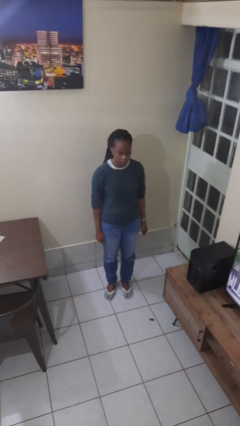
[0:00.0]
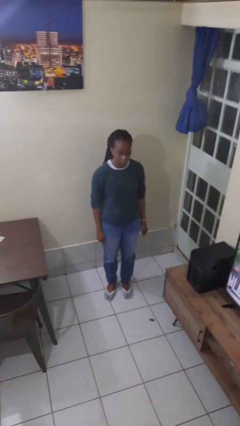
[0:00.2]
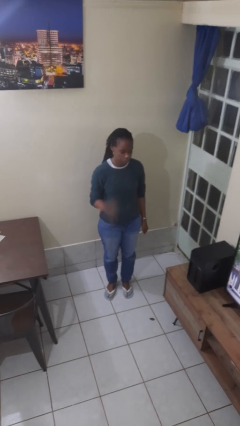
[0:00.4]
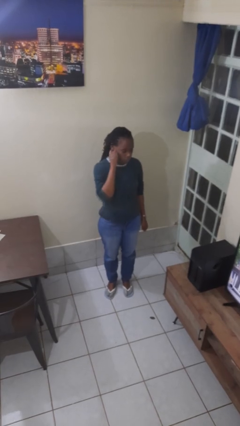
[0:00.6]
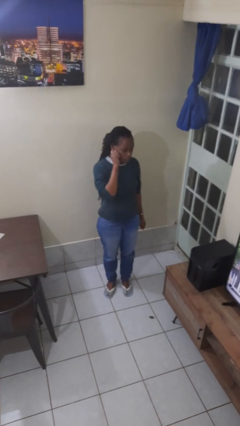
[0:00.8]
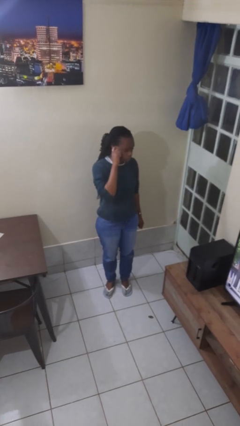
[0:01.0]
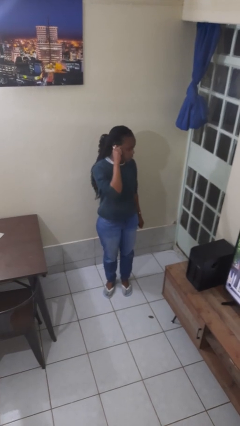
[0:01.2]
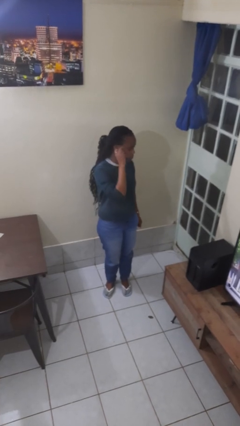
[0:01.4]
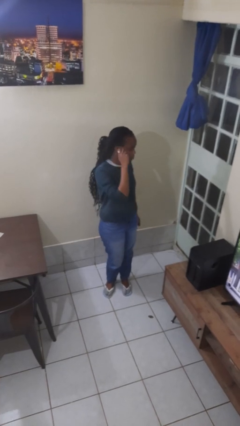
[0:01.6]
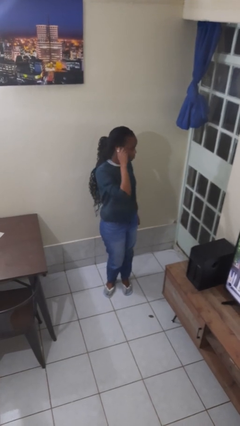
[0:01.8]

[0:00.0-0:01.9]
person touches earlobe

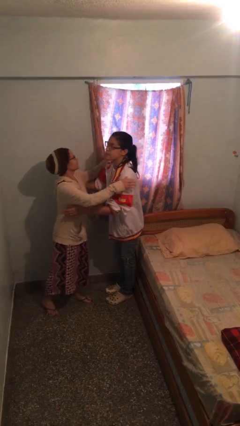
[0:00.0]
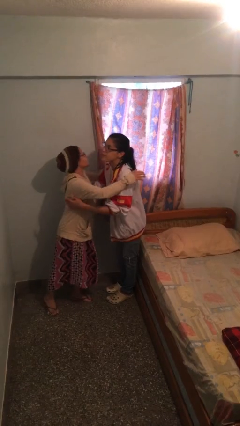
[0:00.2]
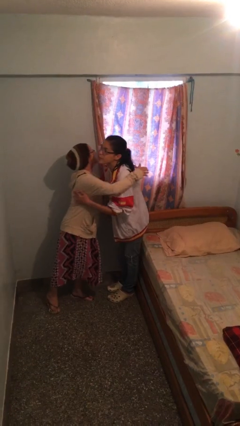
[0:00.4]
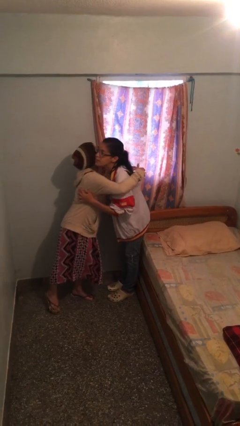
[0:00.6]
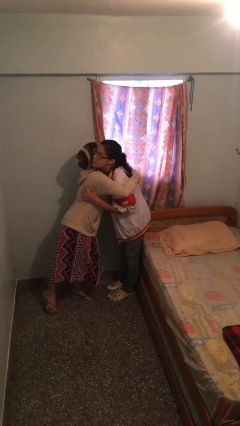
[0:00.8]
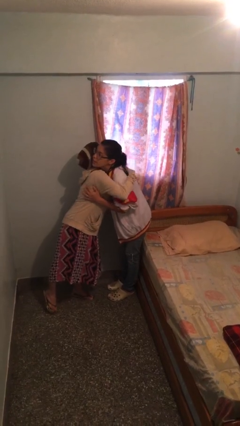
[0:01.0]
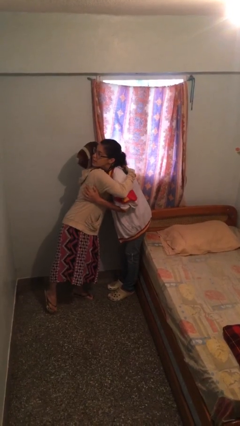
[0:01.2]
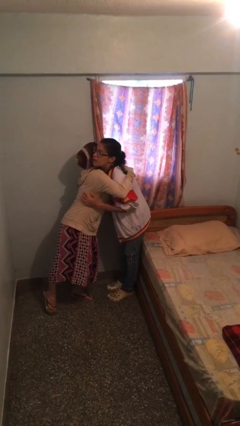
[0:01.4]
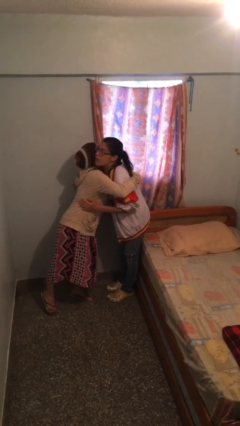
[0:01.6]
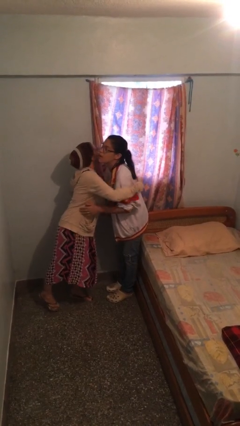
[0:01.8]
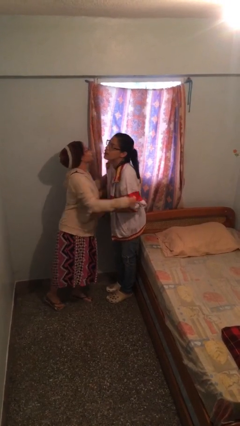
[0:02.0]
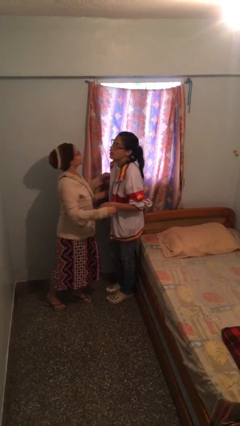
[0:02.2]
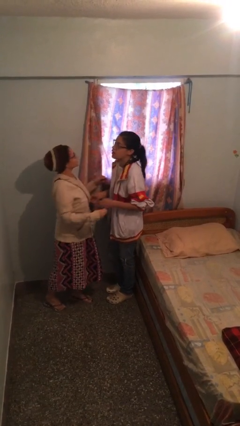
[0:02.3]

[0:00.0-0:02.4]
person embraces person

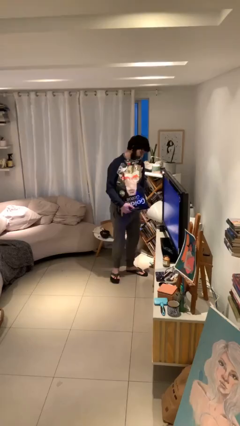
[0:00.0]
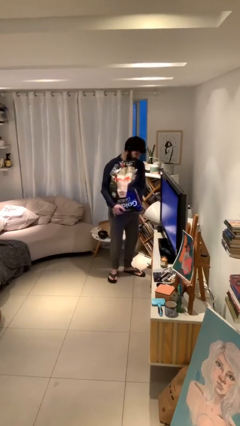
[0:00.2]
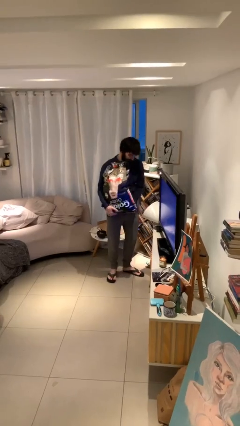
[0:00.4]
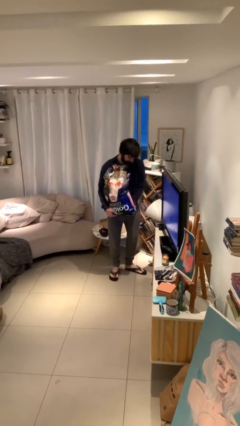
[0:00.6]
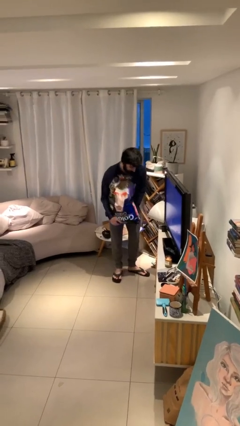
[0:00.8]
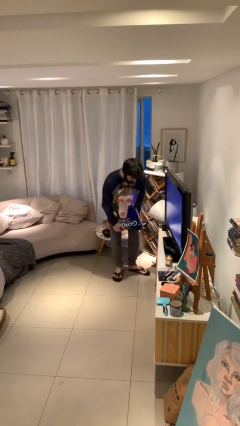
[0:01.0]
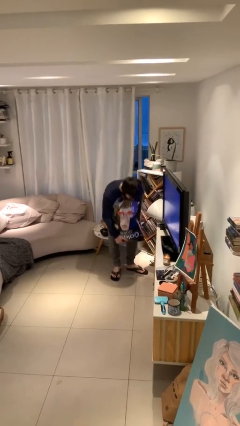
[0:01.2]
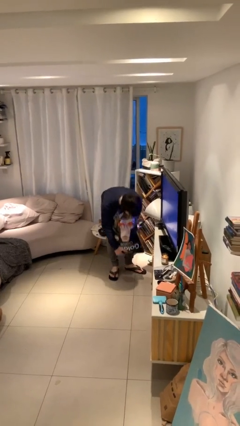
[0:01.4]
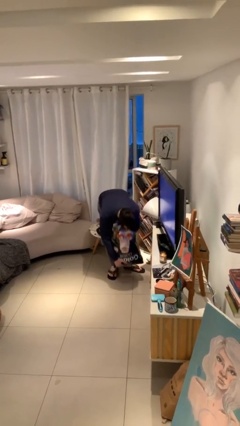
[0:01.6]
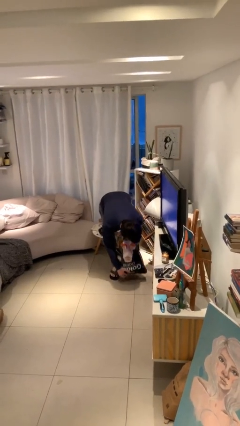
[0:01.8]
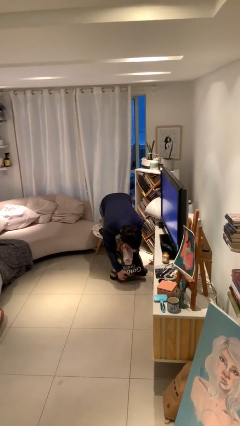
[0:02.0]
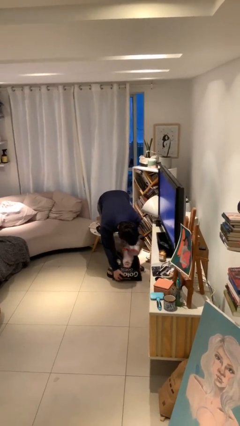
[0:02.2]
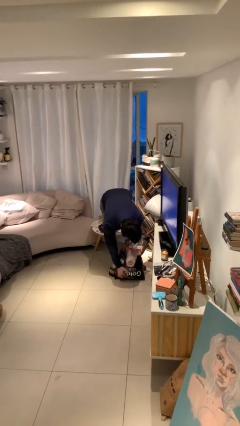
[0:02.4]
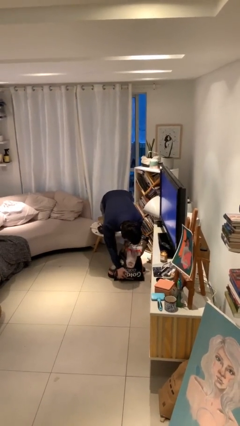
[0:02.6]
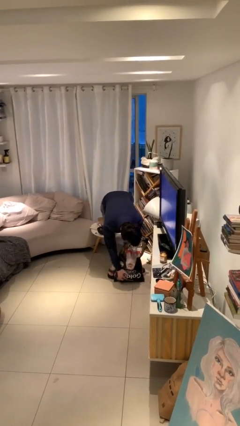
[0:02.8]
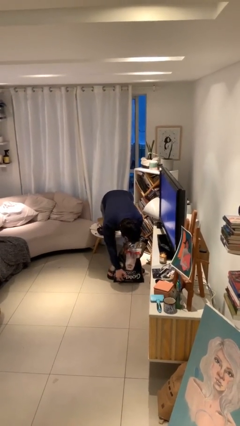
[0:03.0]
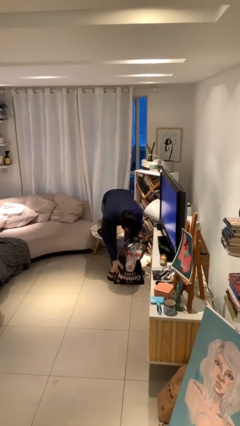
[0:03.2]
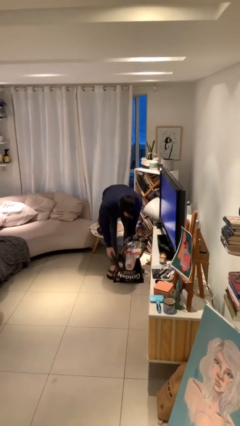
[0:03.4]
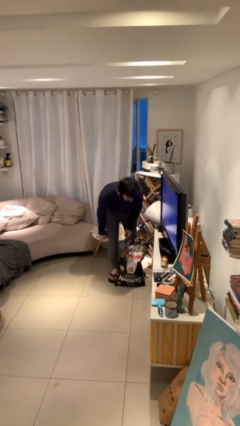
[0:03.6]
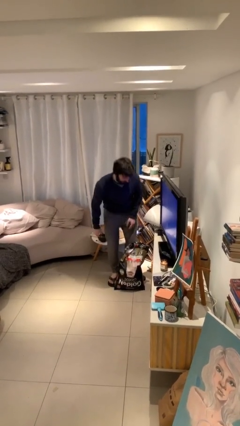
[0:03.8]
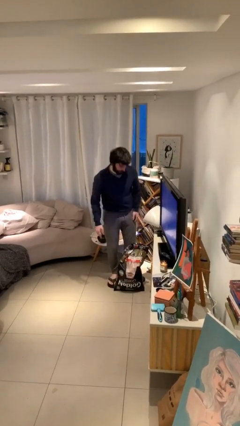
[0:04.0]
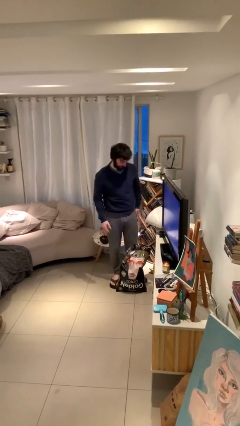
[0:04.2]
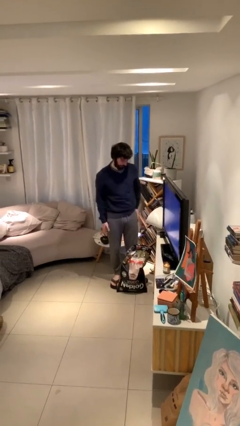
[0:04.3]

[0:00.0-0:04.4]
person puts down object on floor

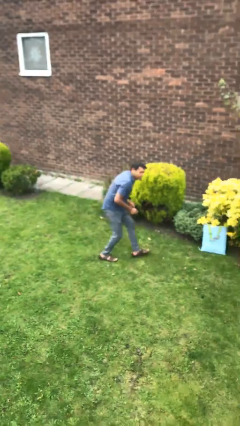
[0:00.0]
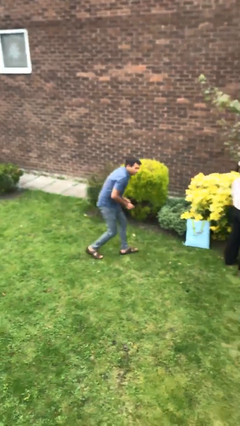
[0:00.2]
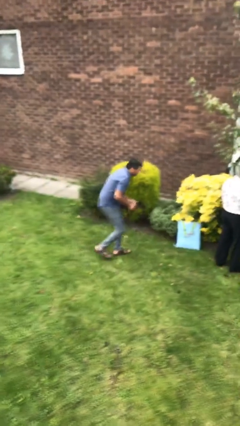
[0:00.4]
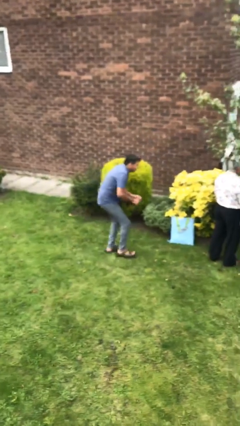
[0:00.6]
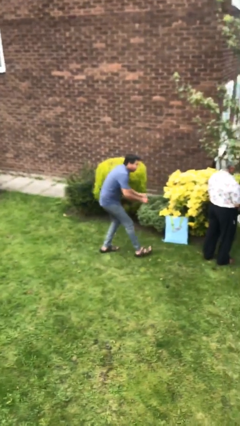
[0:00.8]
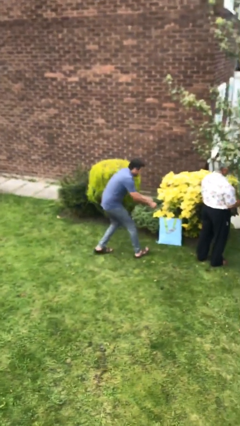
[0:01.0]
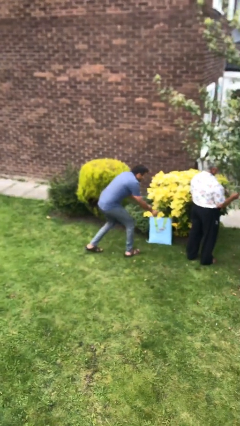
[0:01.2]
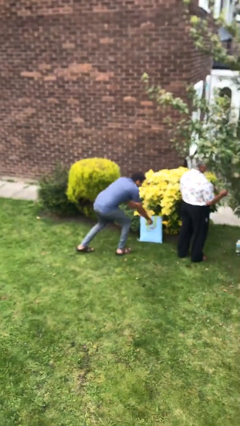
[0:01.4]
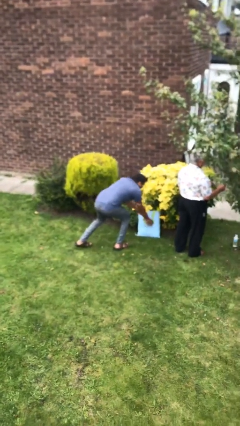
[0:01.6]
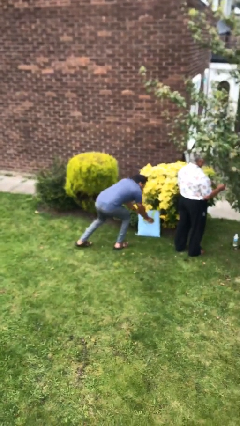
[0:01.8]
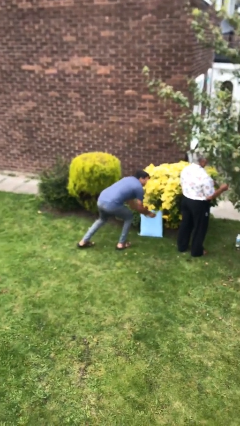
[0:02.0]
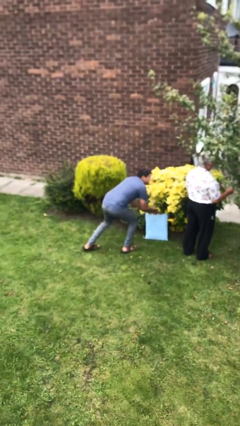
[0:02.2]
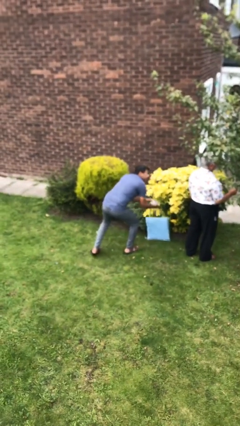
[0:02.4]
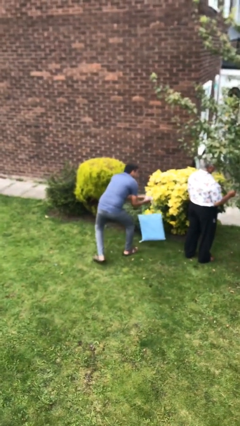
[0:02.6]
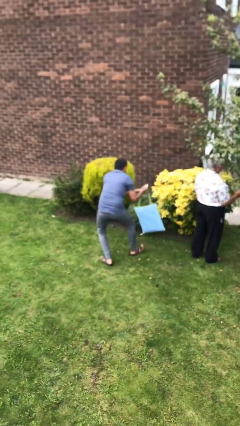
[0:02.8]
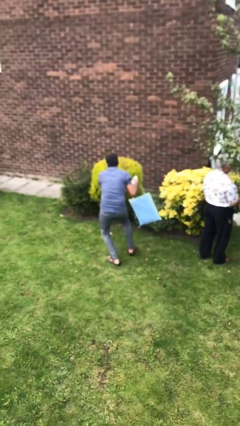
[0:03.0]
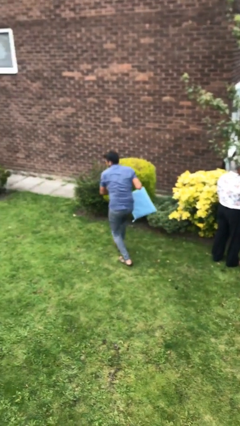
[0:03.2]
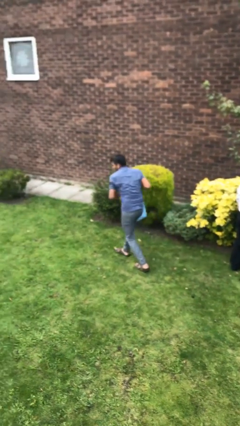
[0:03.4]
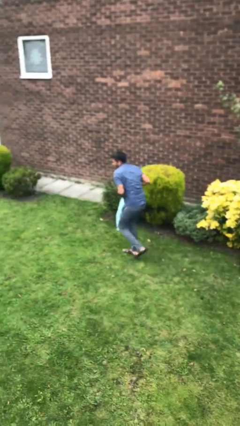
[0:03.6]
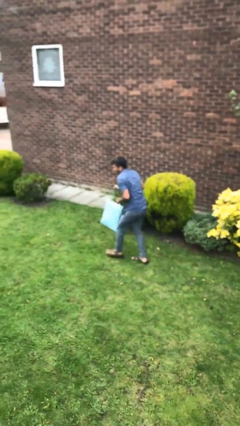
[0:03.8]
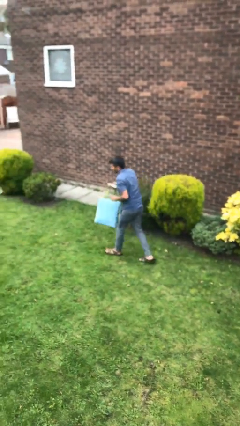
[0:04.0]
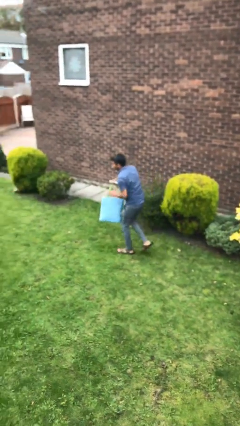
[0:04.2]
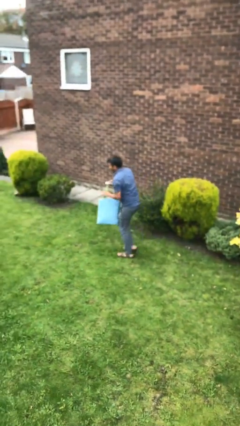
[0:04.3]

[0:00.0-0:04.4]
person steals object from person

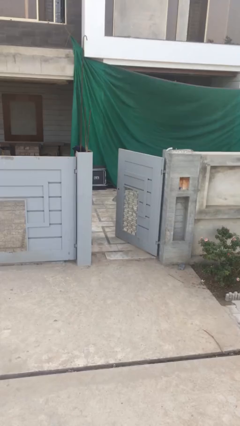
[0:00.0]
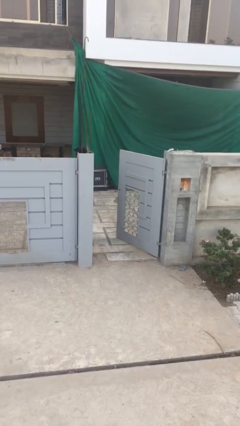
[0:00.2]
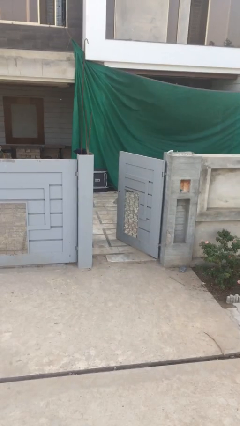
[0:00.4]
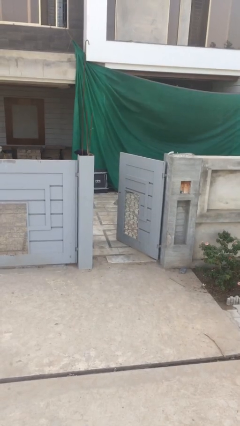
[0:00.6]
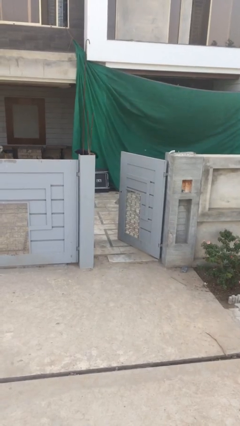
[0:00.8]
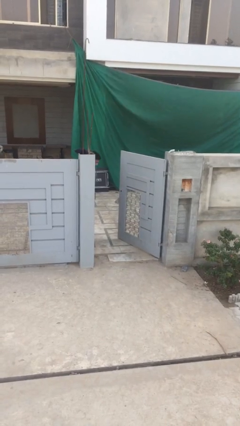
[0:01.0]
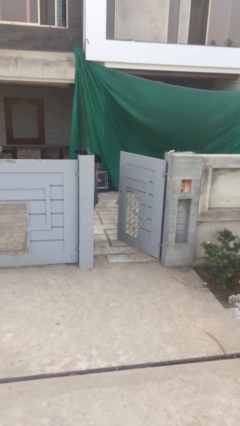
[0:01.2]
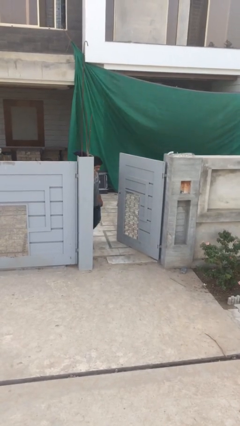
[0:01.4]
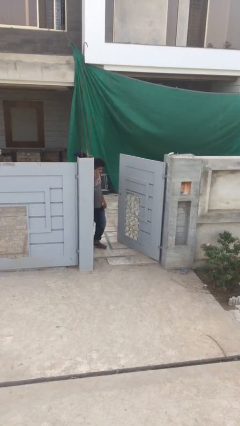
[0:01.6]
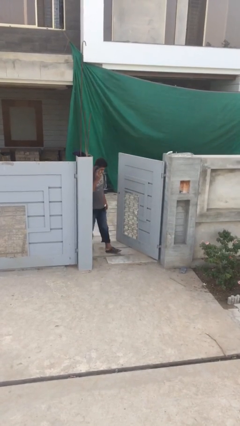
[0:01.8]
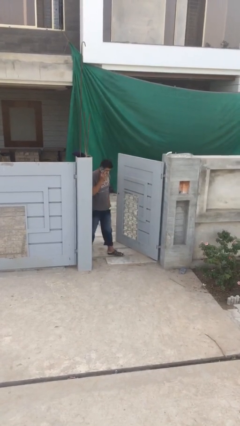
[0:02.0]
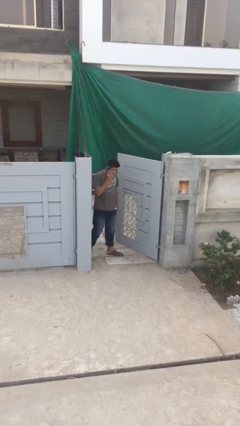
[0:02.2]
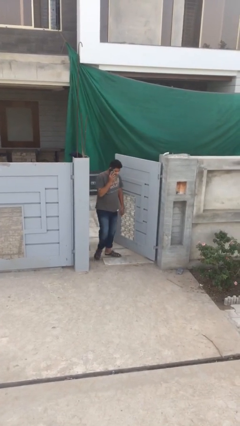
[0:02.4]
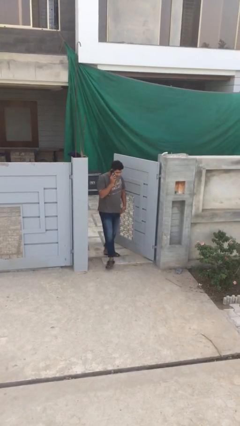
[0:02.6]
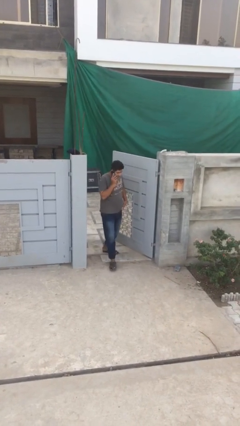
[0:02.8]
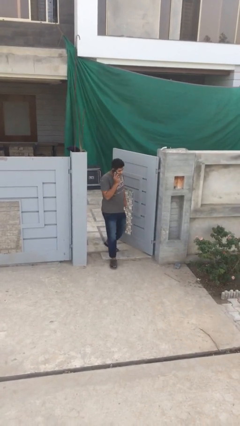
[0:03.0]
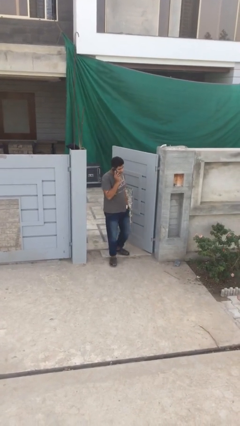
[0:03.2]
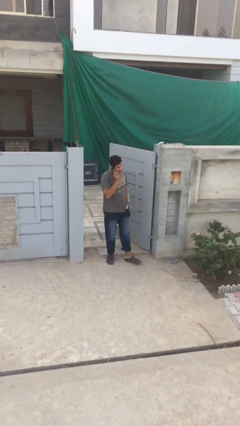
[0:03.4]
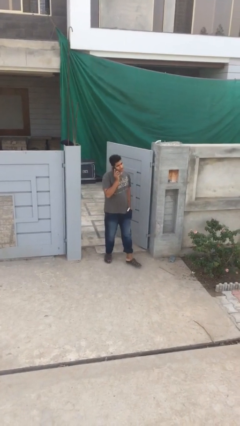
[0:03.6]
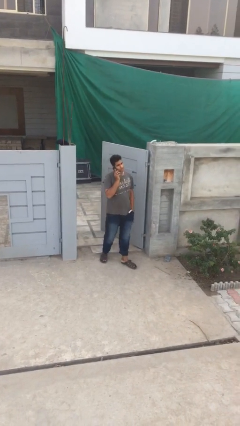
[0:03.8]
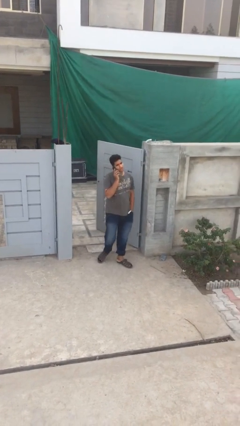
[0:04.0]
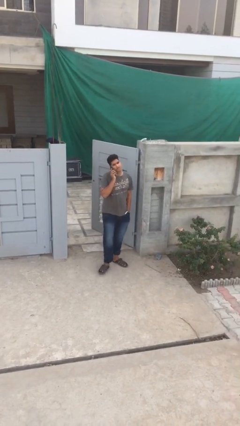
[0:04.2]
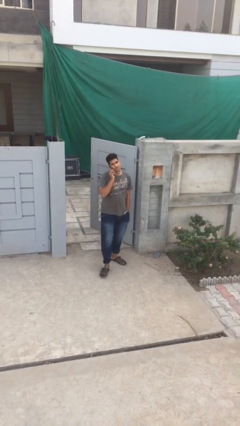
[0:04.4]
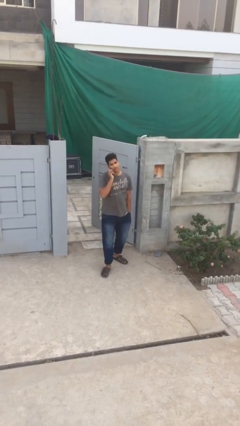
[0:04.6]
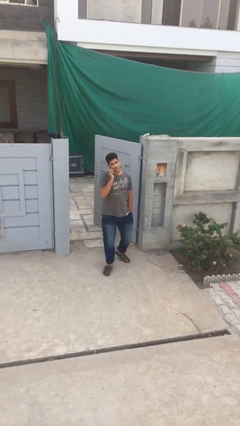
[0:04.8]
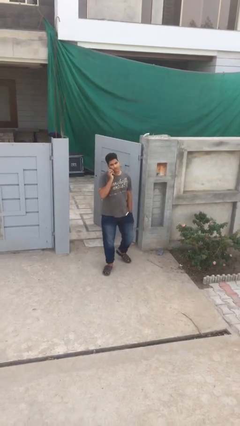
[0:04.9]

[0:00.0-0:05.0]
person enters scene through structure
